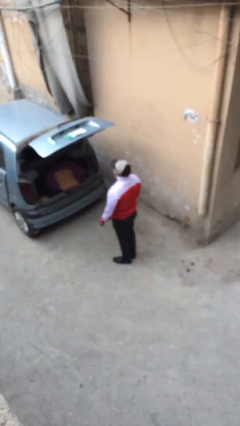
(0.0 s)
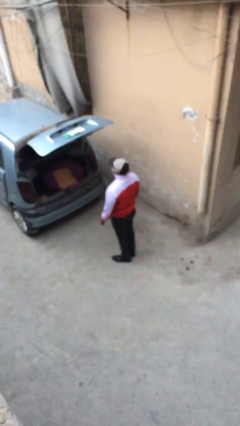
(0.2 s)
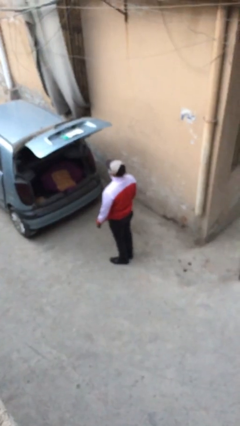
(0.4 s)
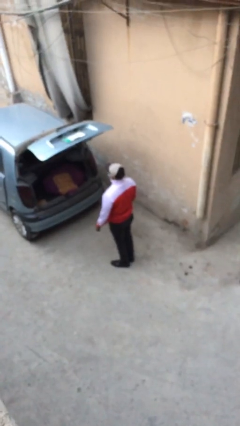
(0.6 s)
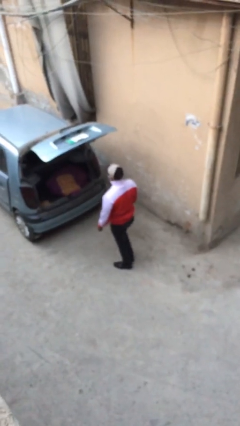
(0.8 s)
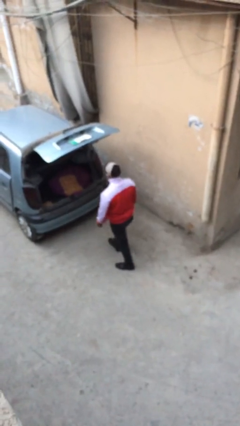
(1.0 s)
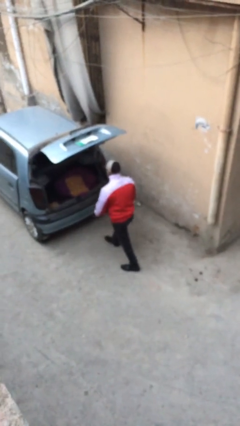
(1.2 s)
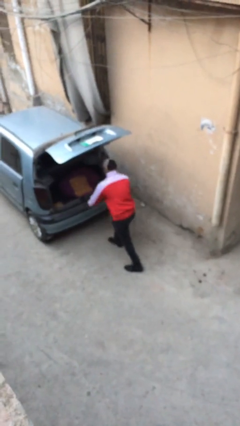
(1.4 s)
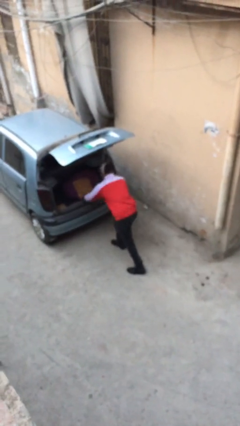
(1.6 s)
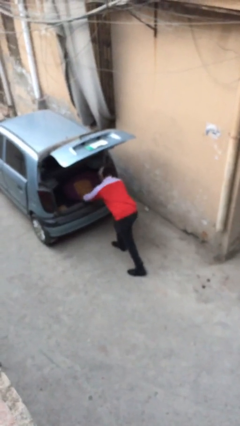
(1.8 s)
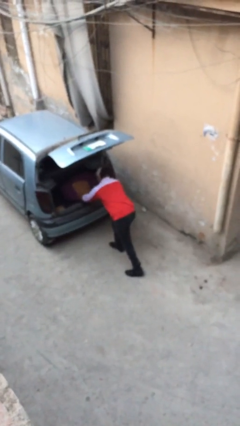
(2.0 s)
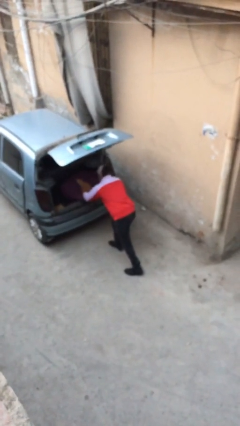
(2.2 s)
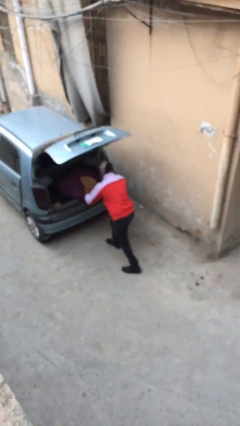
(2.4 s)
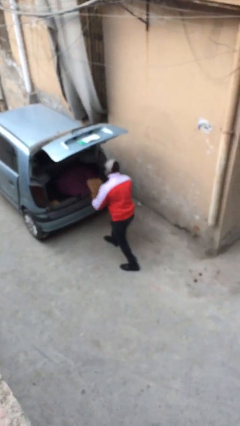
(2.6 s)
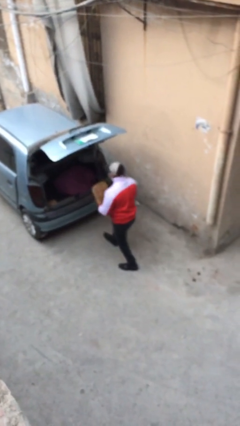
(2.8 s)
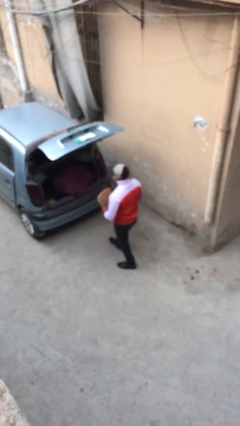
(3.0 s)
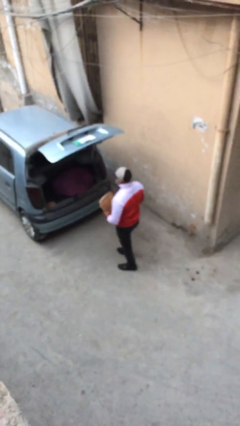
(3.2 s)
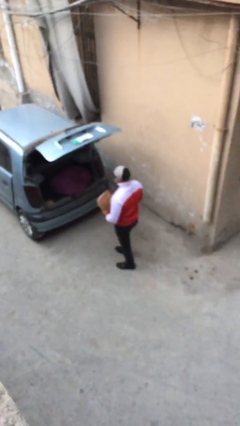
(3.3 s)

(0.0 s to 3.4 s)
person unloads car

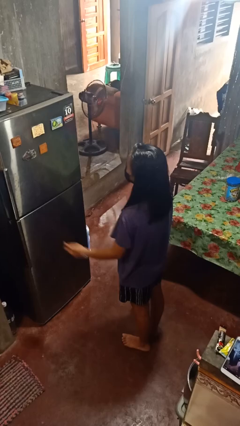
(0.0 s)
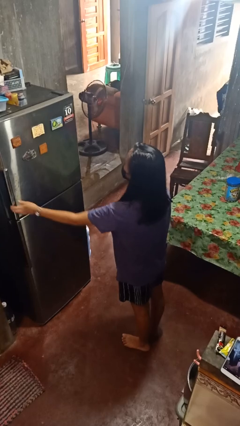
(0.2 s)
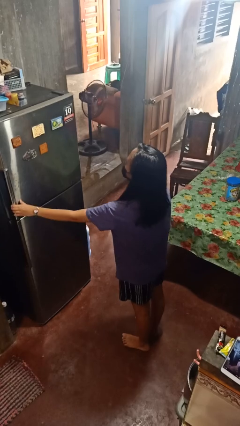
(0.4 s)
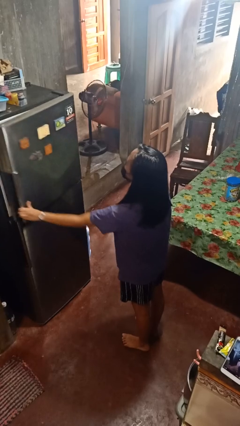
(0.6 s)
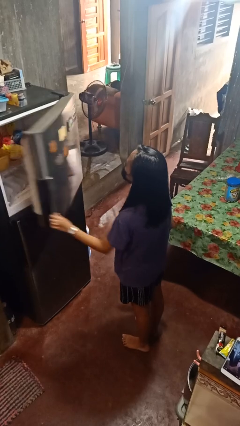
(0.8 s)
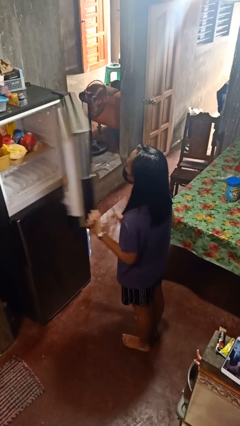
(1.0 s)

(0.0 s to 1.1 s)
person opens refrigerator

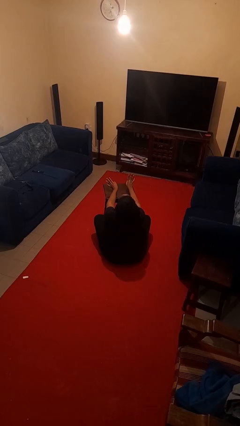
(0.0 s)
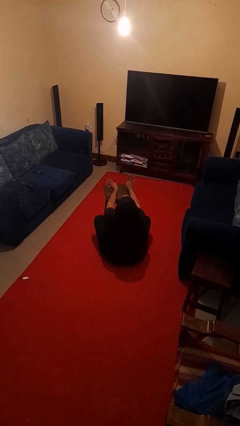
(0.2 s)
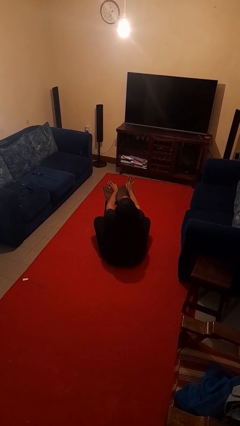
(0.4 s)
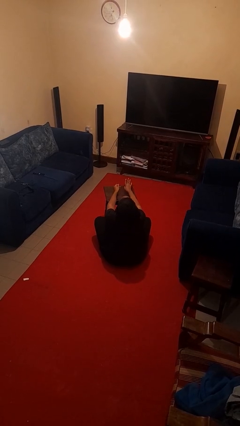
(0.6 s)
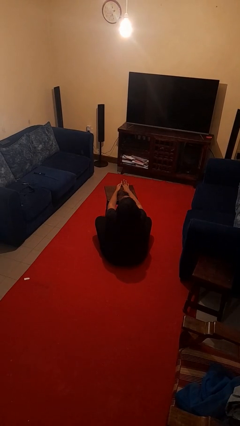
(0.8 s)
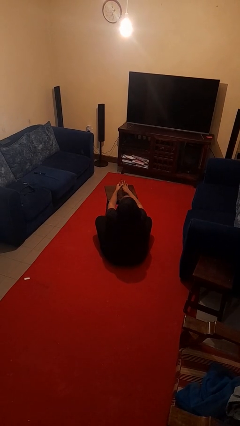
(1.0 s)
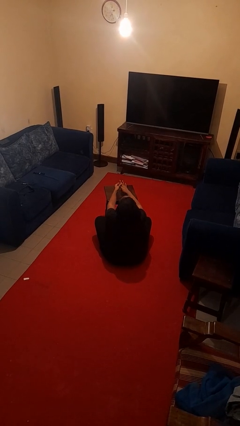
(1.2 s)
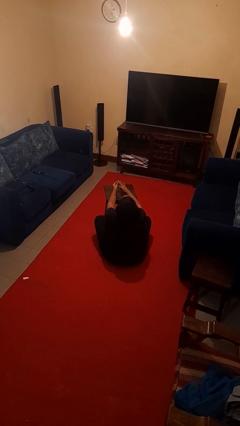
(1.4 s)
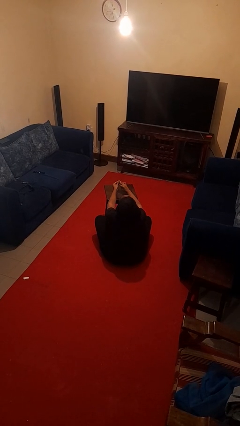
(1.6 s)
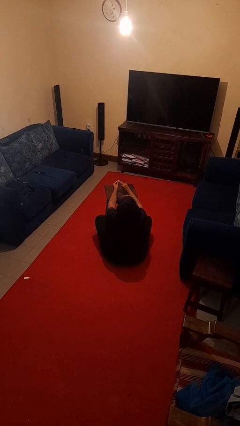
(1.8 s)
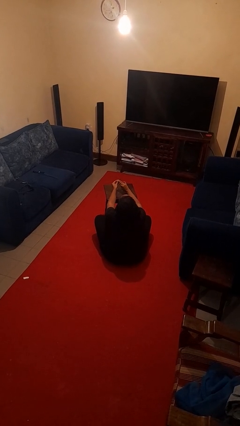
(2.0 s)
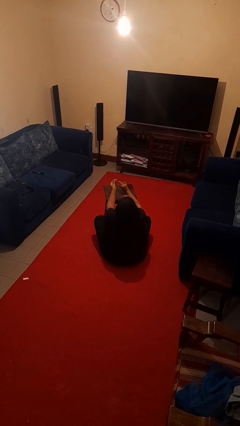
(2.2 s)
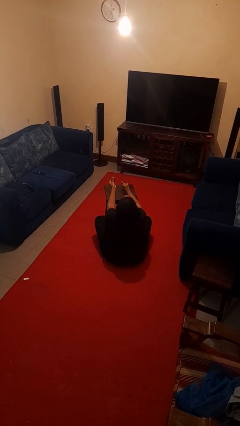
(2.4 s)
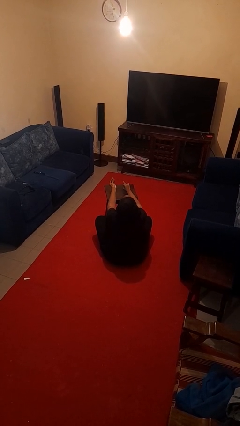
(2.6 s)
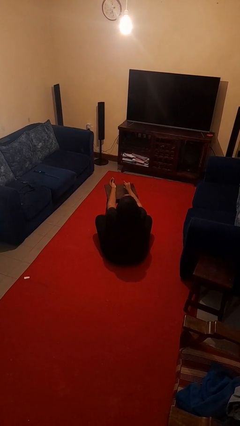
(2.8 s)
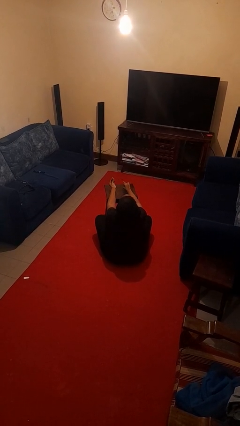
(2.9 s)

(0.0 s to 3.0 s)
person takes off ring

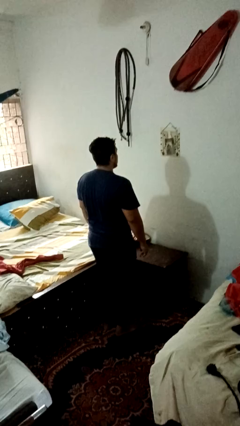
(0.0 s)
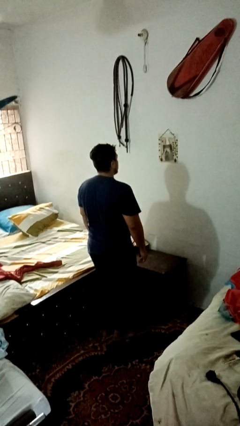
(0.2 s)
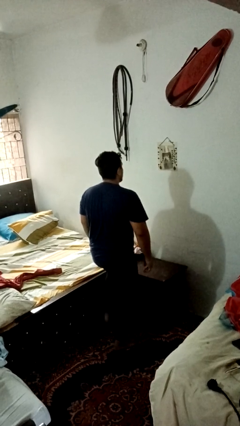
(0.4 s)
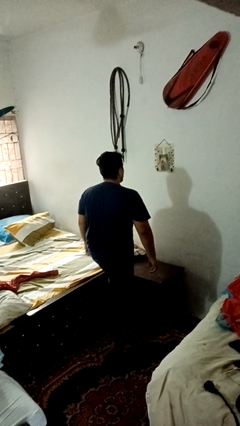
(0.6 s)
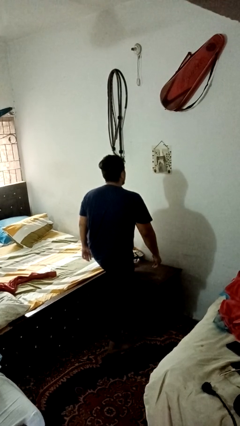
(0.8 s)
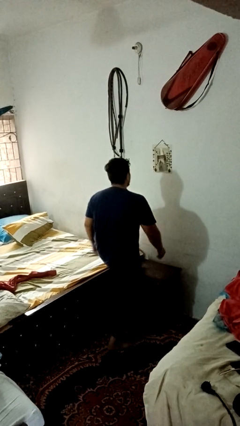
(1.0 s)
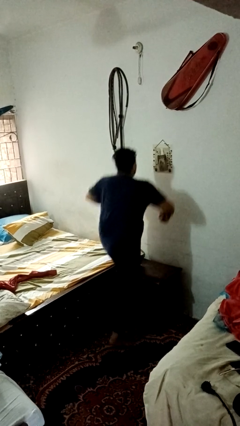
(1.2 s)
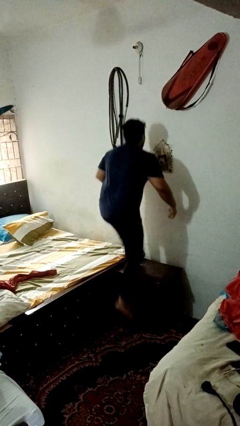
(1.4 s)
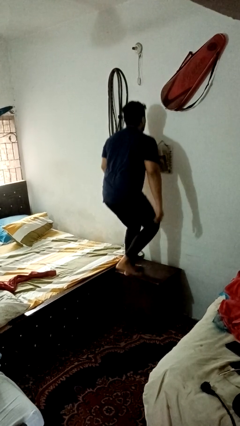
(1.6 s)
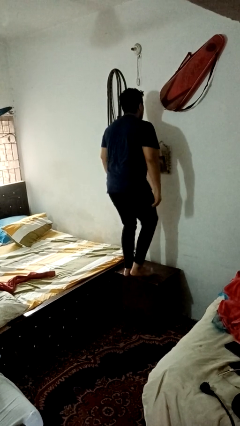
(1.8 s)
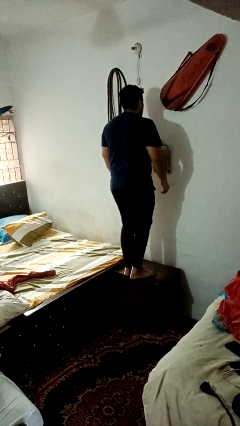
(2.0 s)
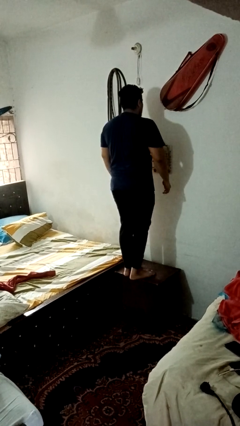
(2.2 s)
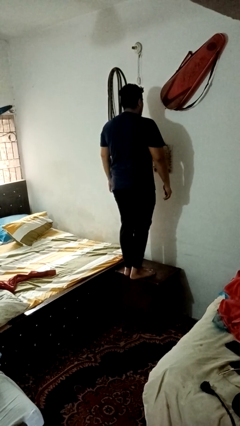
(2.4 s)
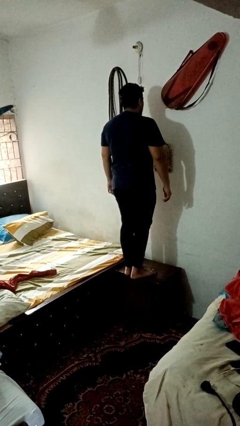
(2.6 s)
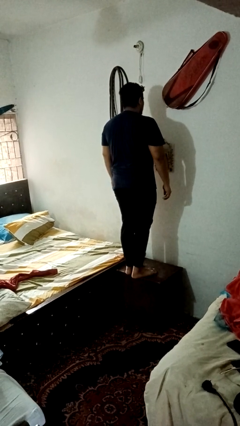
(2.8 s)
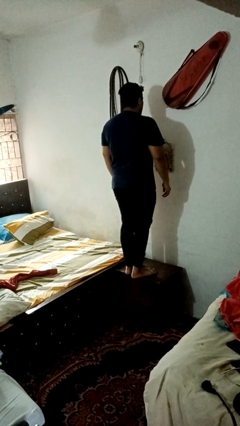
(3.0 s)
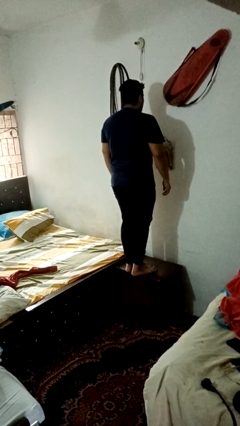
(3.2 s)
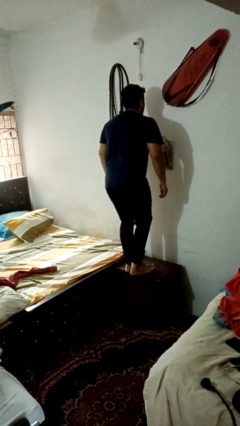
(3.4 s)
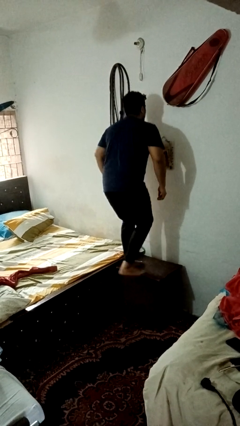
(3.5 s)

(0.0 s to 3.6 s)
person climbs on table

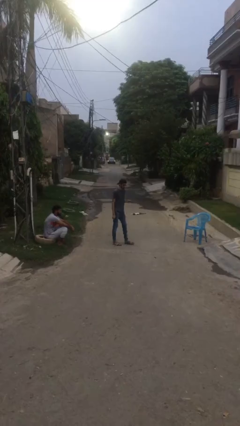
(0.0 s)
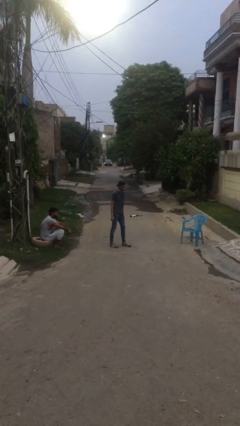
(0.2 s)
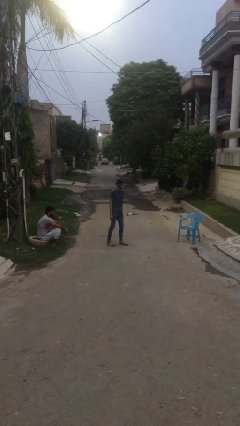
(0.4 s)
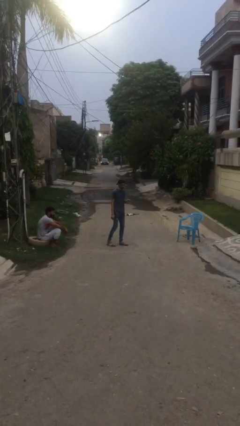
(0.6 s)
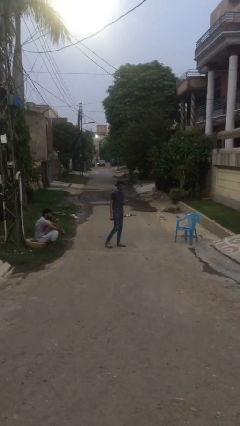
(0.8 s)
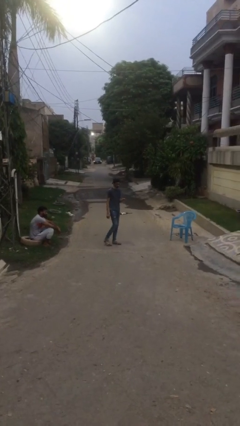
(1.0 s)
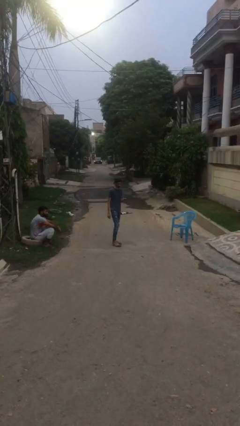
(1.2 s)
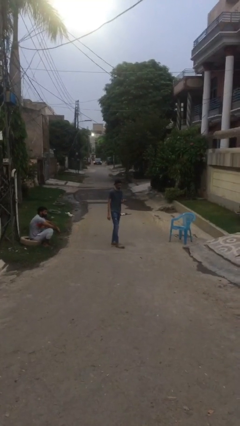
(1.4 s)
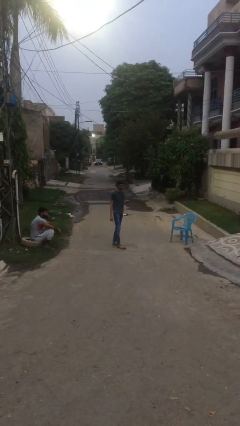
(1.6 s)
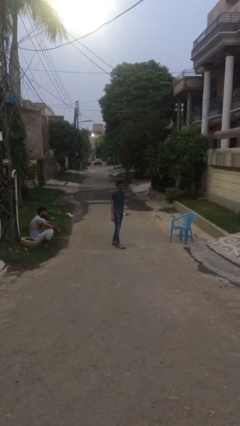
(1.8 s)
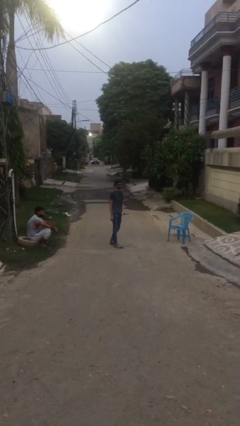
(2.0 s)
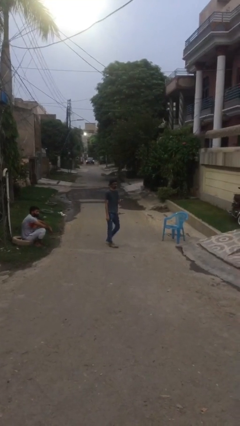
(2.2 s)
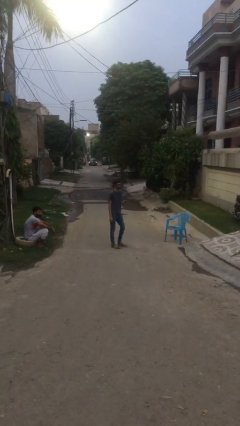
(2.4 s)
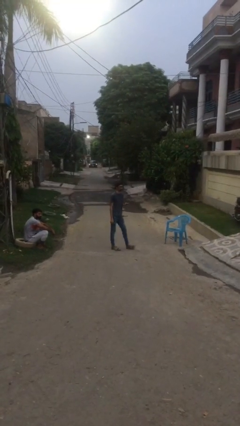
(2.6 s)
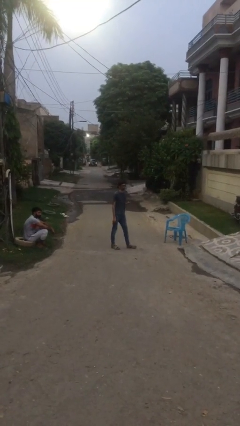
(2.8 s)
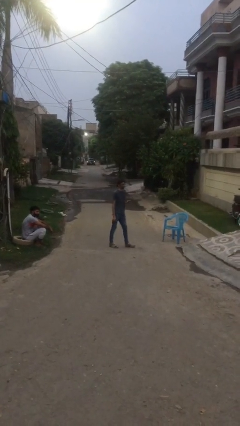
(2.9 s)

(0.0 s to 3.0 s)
person texts on phone

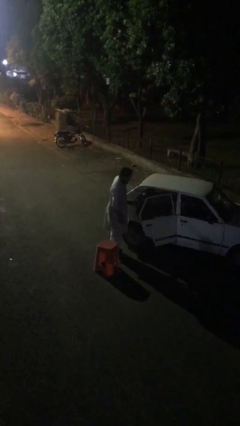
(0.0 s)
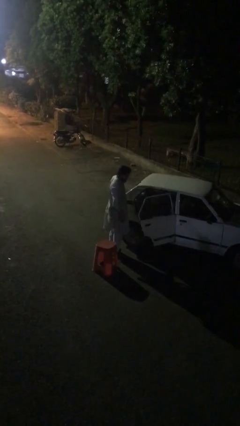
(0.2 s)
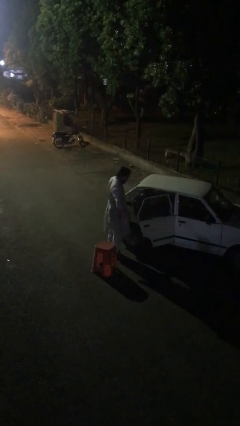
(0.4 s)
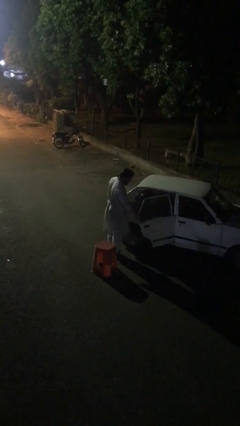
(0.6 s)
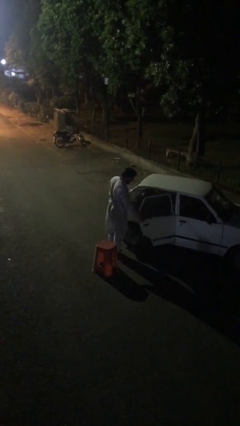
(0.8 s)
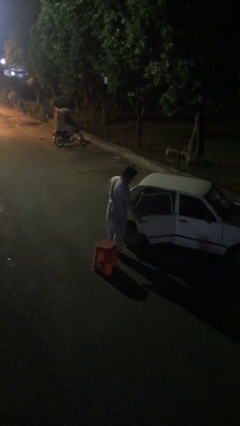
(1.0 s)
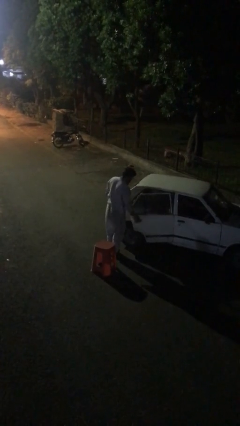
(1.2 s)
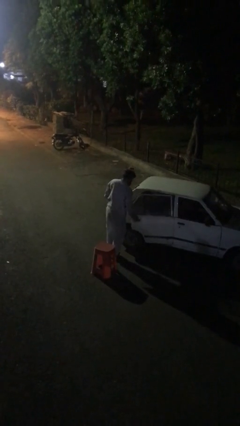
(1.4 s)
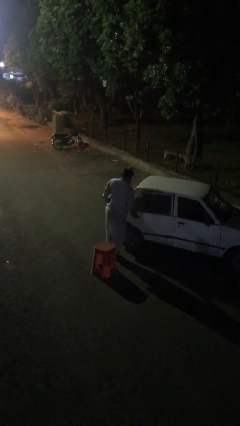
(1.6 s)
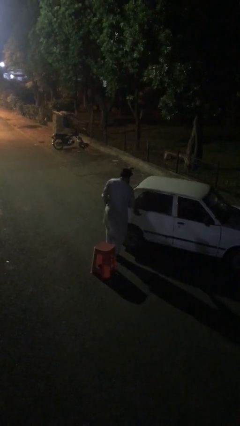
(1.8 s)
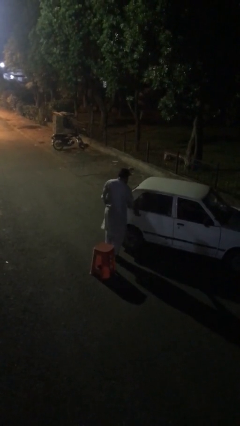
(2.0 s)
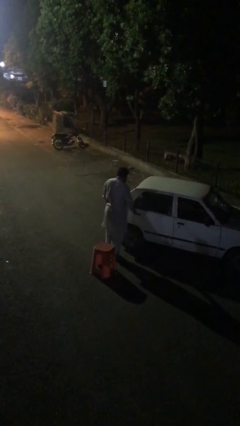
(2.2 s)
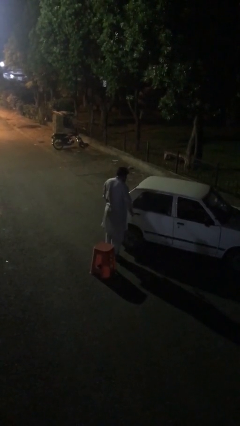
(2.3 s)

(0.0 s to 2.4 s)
person closes car door

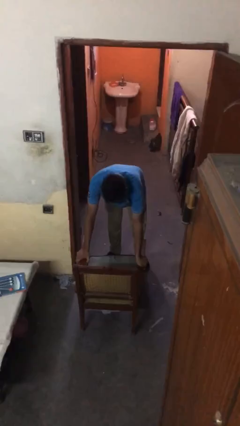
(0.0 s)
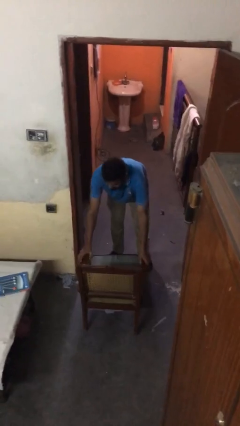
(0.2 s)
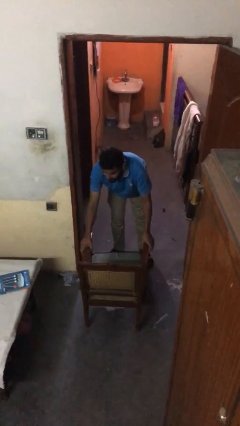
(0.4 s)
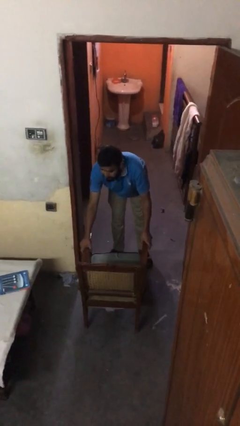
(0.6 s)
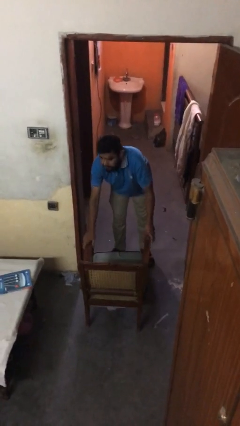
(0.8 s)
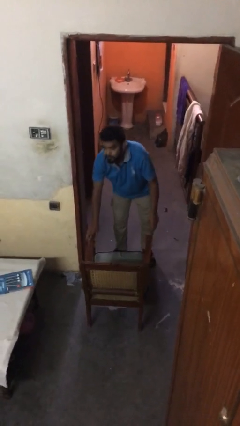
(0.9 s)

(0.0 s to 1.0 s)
person puts down object on floor
